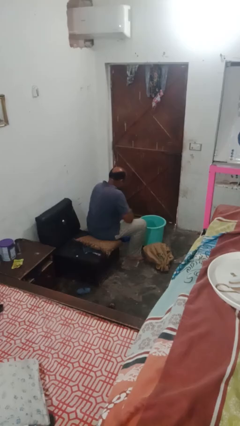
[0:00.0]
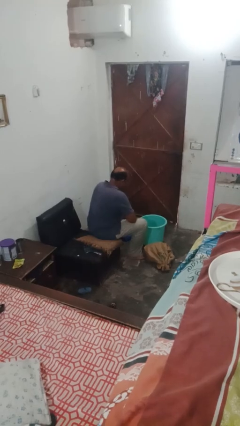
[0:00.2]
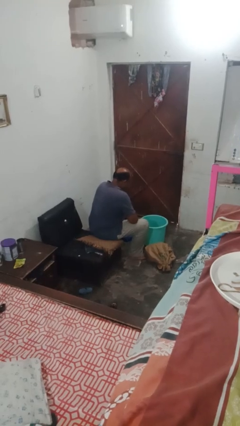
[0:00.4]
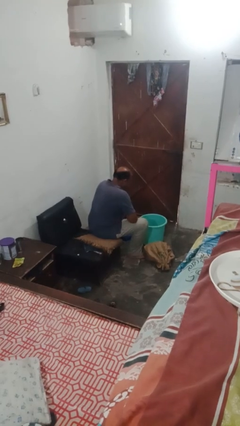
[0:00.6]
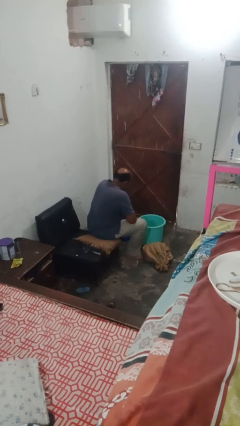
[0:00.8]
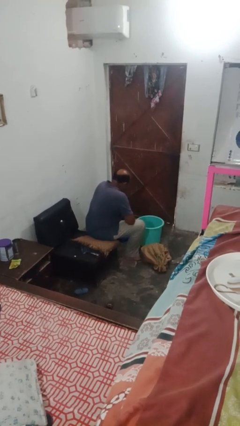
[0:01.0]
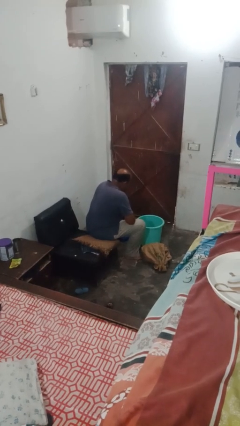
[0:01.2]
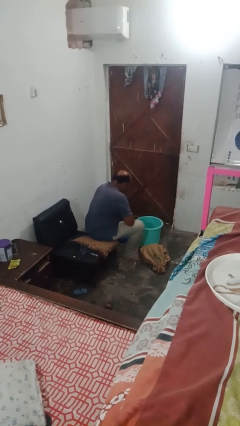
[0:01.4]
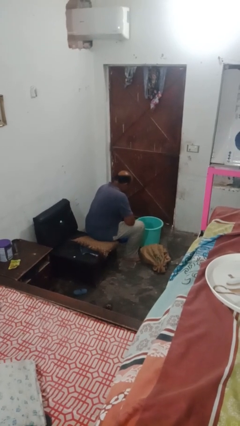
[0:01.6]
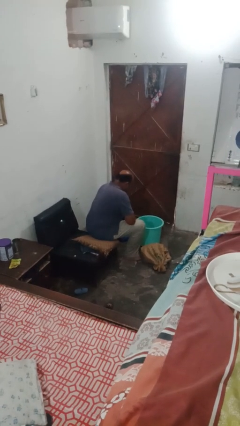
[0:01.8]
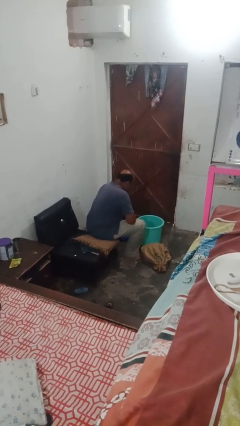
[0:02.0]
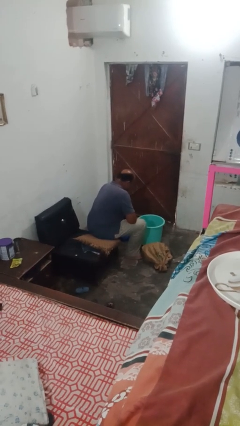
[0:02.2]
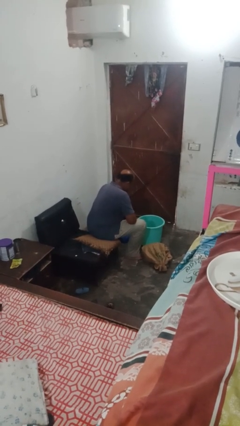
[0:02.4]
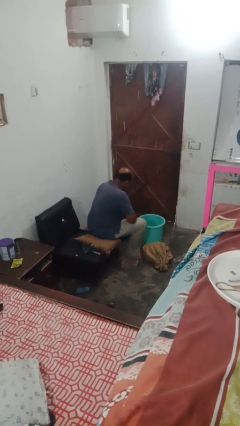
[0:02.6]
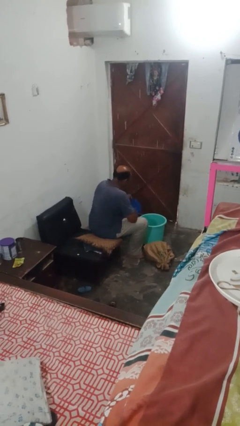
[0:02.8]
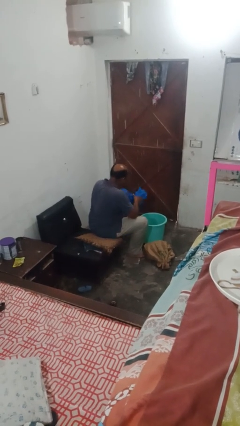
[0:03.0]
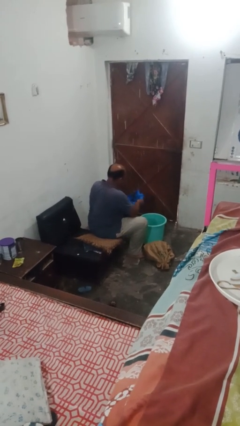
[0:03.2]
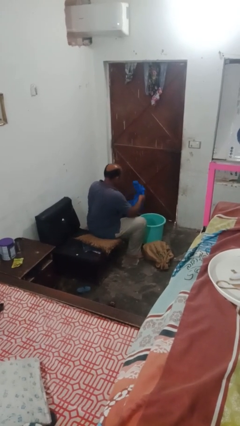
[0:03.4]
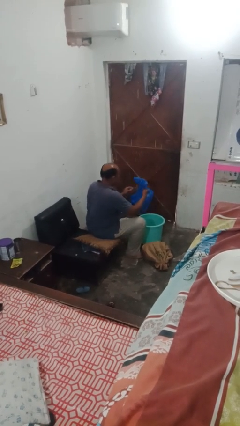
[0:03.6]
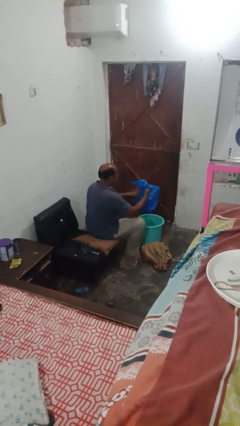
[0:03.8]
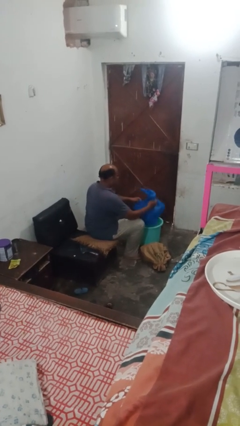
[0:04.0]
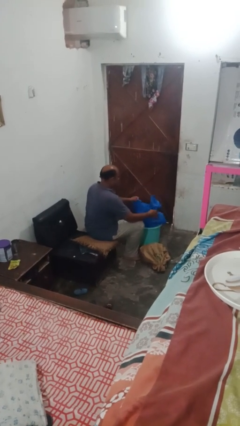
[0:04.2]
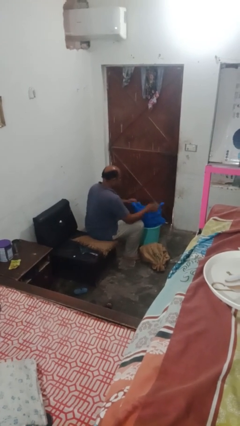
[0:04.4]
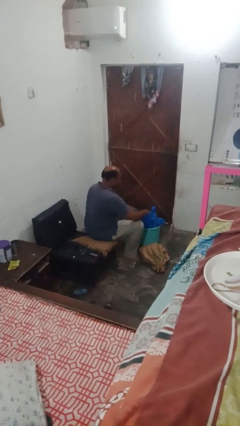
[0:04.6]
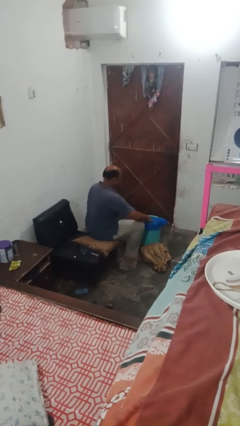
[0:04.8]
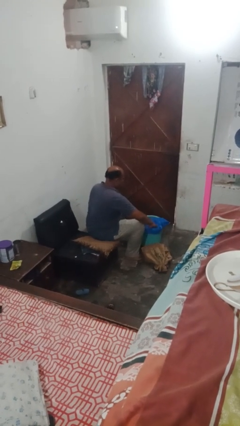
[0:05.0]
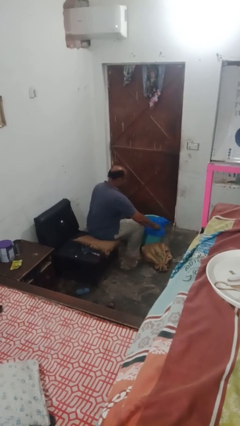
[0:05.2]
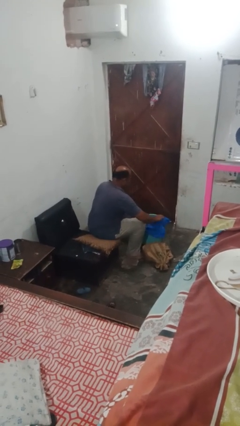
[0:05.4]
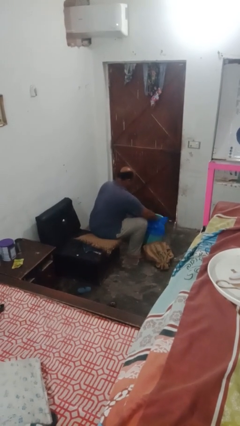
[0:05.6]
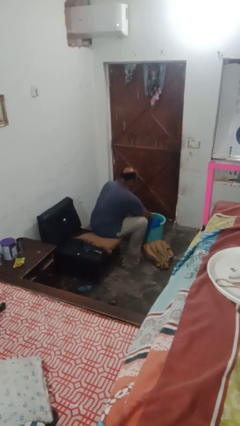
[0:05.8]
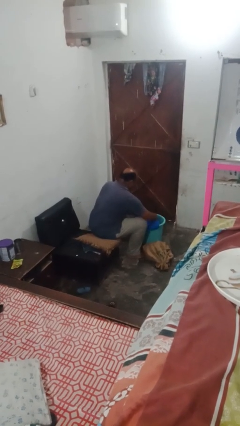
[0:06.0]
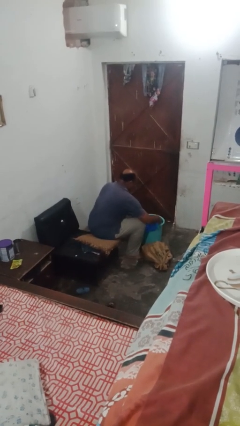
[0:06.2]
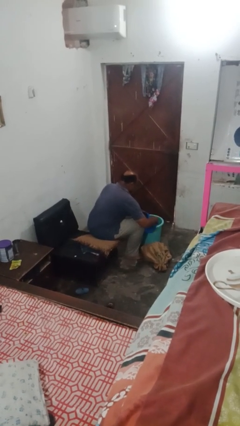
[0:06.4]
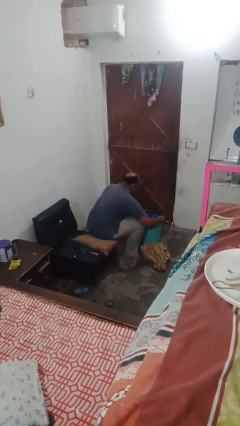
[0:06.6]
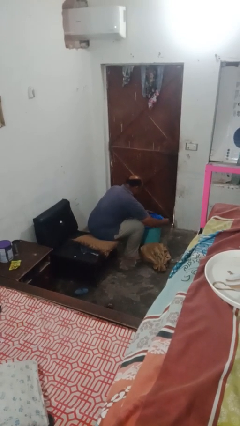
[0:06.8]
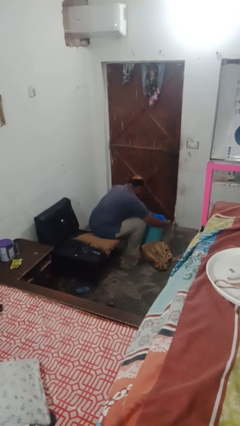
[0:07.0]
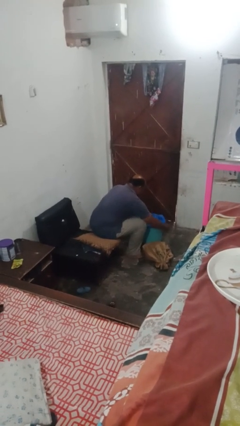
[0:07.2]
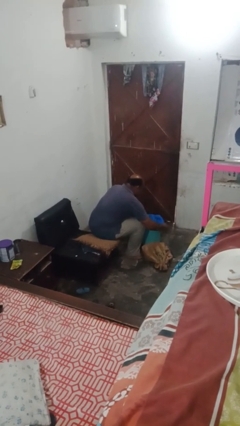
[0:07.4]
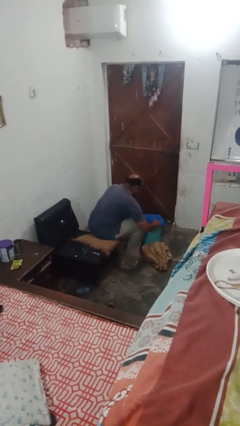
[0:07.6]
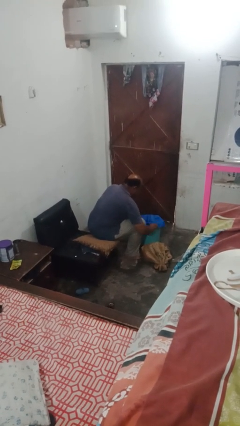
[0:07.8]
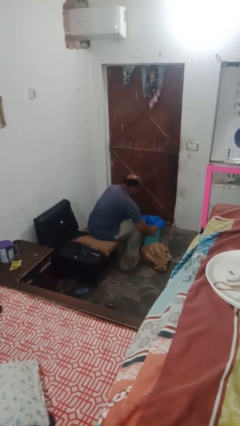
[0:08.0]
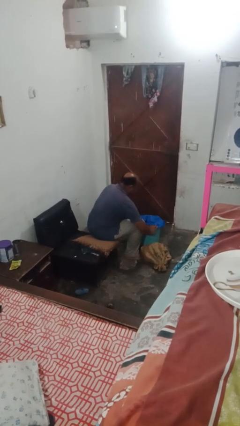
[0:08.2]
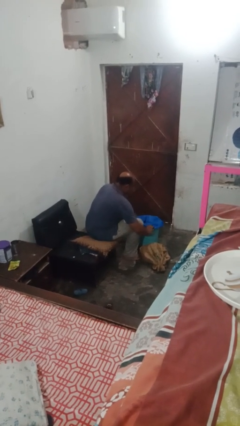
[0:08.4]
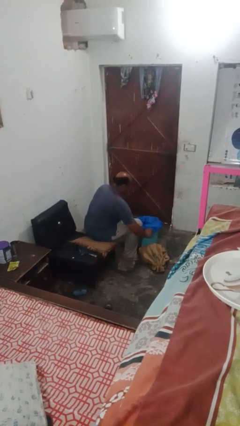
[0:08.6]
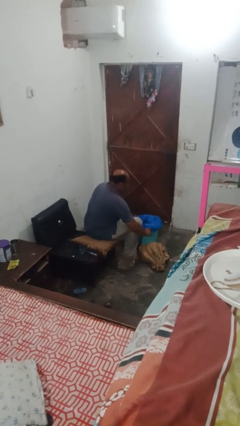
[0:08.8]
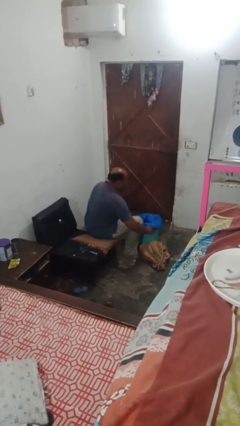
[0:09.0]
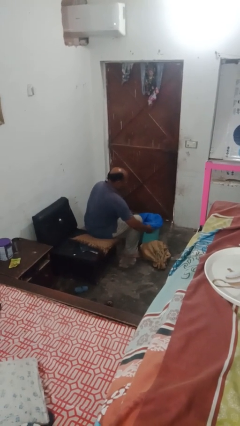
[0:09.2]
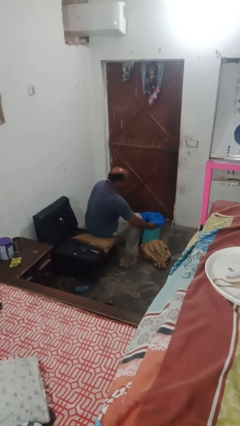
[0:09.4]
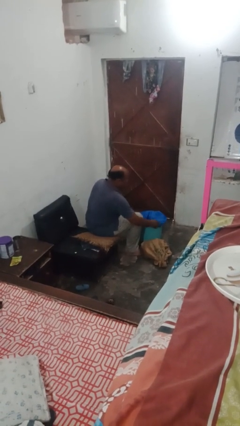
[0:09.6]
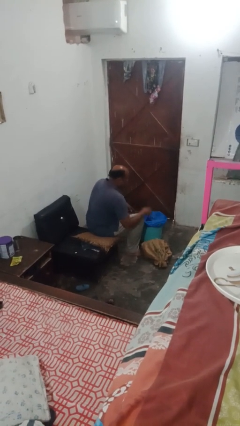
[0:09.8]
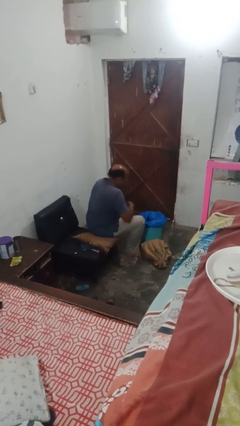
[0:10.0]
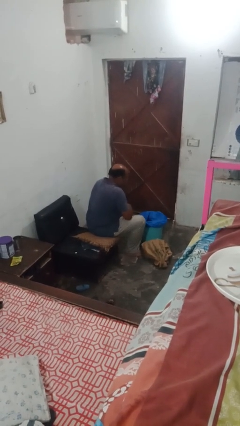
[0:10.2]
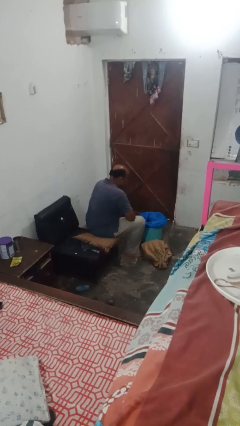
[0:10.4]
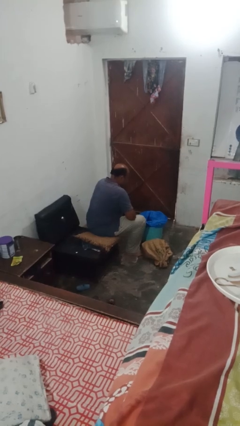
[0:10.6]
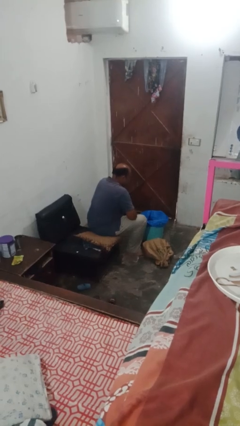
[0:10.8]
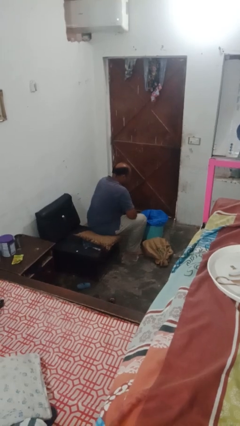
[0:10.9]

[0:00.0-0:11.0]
person inserts trashbag into trashcan

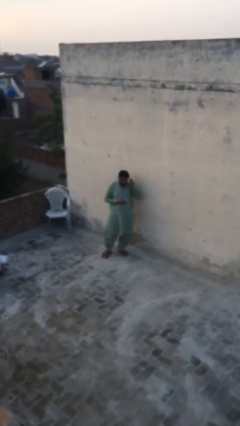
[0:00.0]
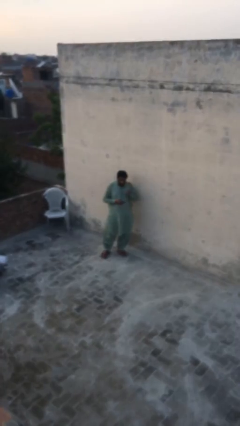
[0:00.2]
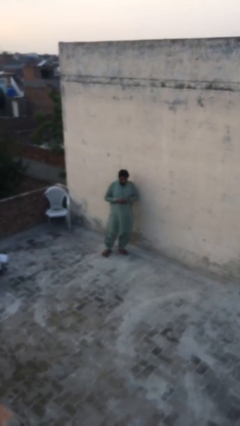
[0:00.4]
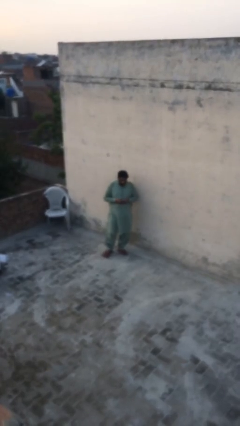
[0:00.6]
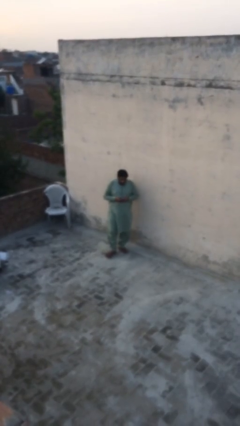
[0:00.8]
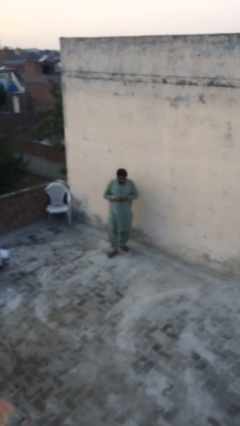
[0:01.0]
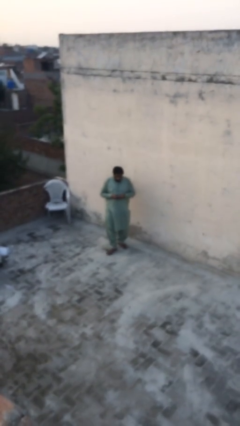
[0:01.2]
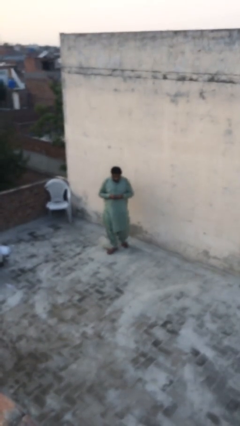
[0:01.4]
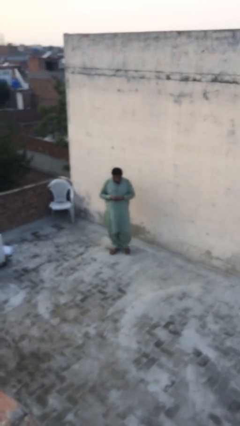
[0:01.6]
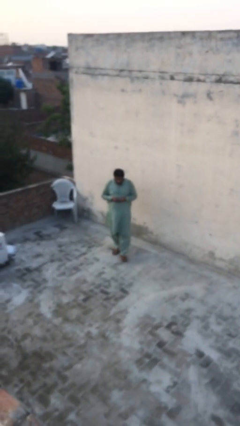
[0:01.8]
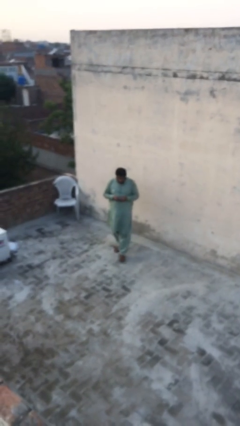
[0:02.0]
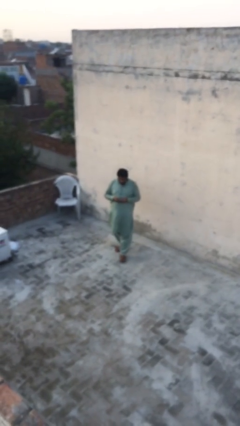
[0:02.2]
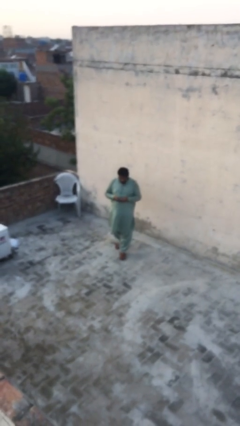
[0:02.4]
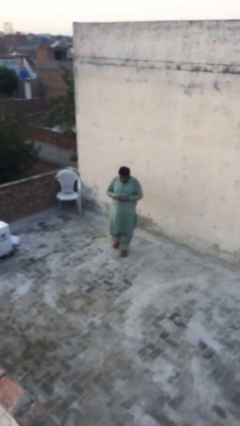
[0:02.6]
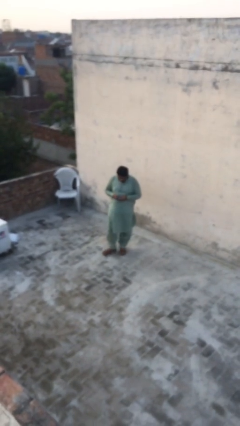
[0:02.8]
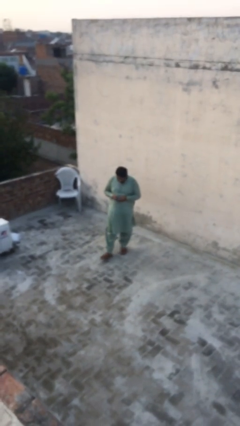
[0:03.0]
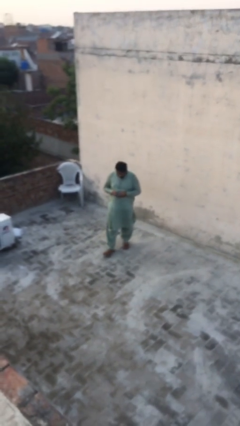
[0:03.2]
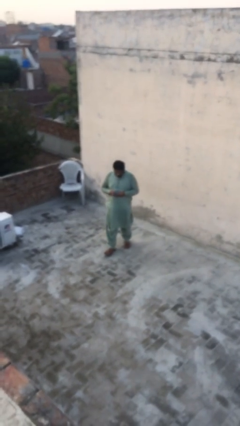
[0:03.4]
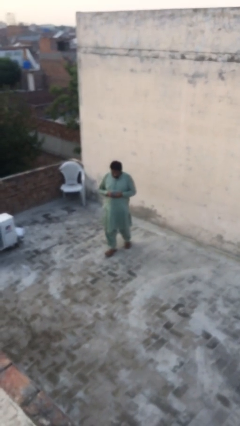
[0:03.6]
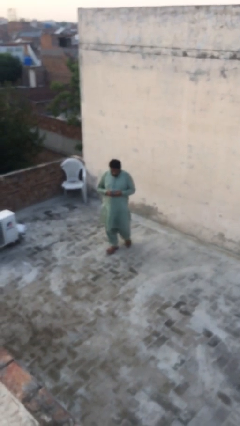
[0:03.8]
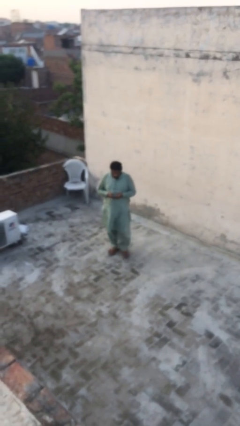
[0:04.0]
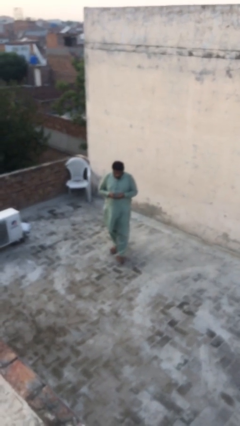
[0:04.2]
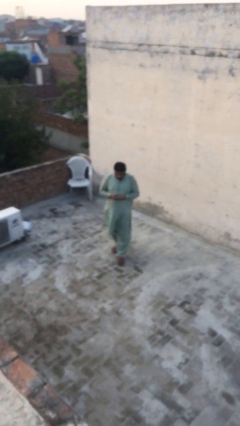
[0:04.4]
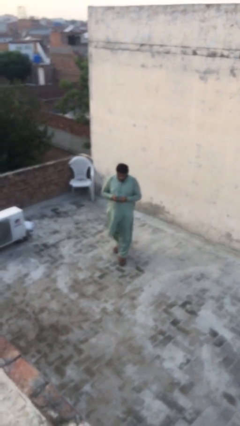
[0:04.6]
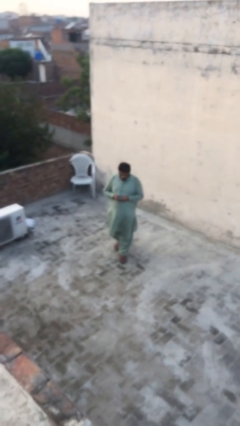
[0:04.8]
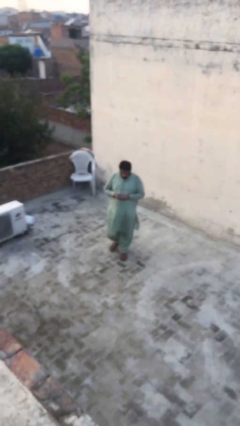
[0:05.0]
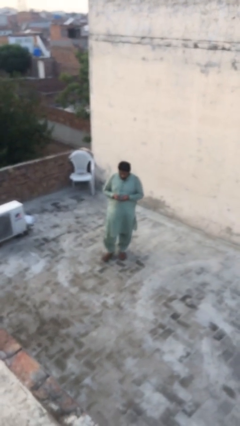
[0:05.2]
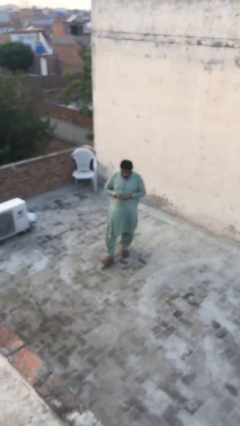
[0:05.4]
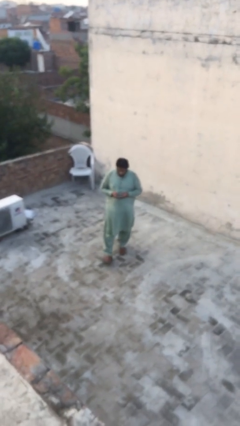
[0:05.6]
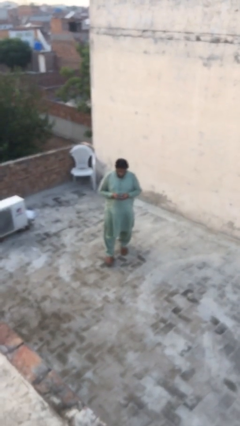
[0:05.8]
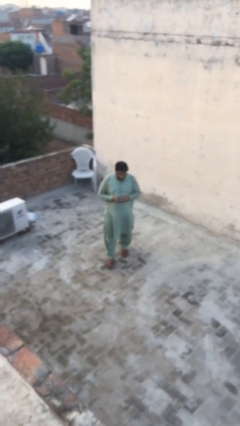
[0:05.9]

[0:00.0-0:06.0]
person texts on phone

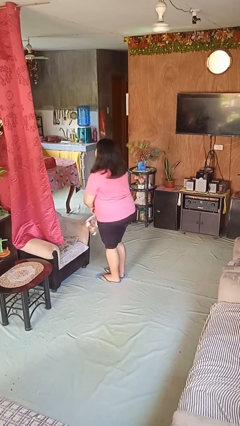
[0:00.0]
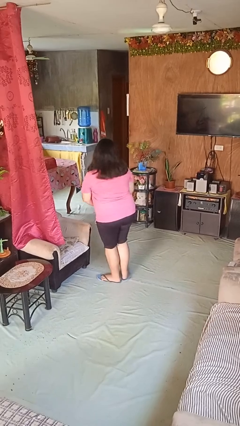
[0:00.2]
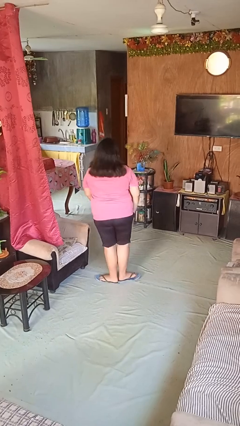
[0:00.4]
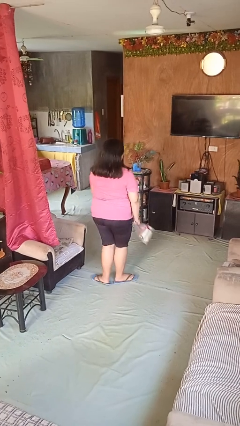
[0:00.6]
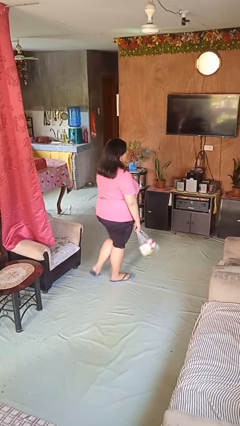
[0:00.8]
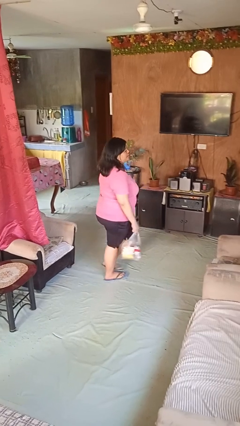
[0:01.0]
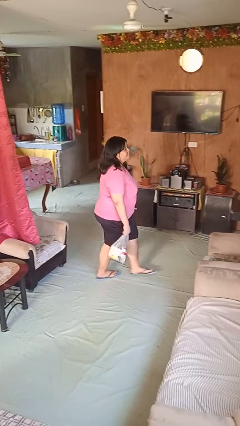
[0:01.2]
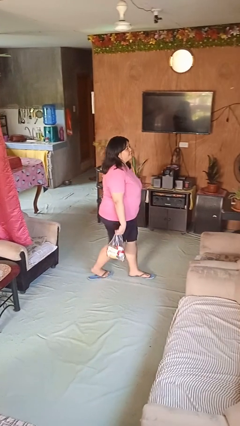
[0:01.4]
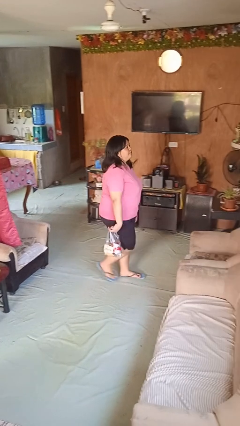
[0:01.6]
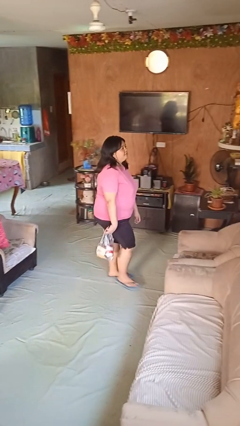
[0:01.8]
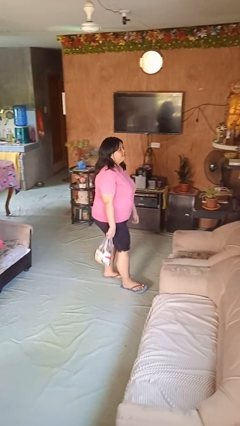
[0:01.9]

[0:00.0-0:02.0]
person carries groceries
